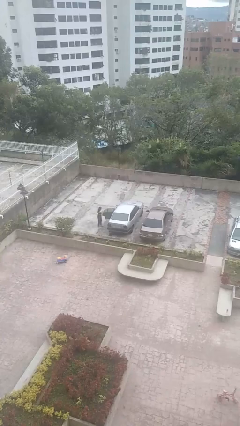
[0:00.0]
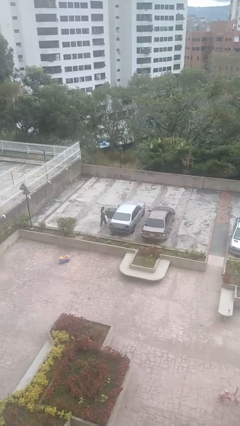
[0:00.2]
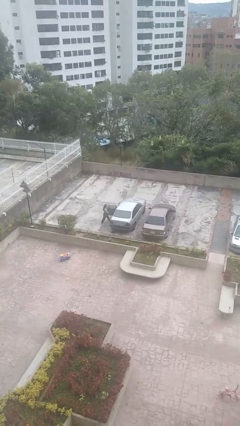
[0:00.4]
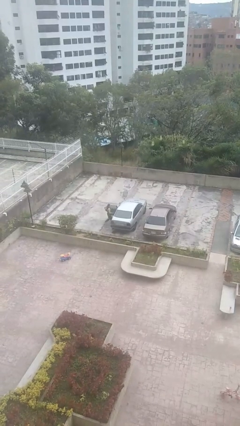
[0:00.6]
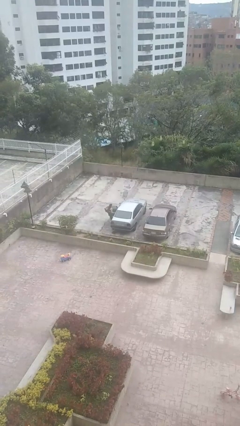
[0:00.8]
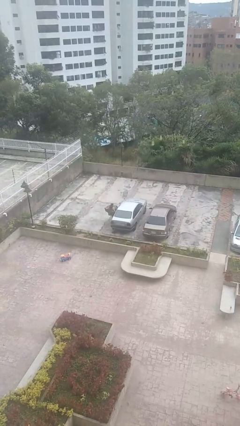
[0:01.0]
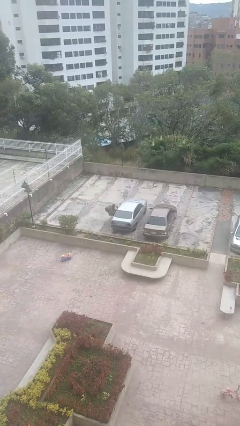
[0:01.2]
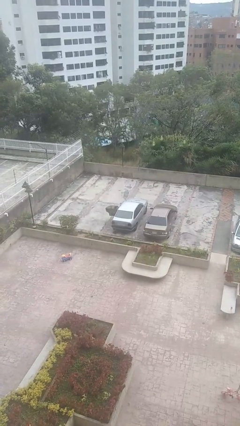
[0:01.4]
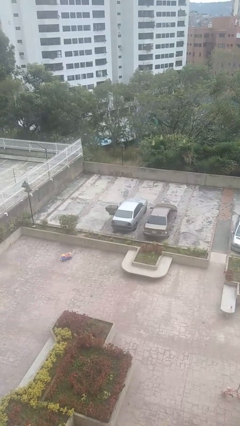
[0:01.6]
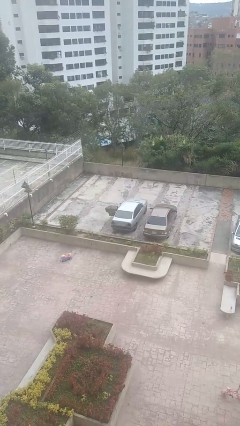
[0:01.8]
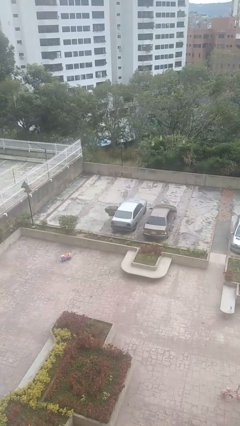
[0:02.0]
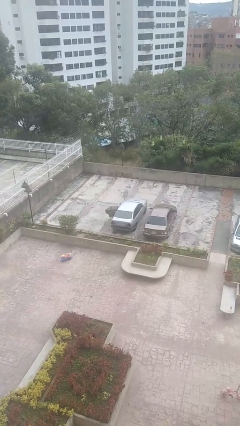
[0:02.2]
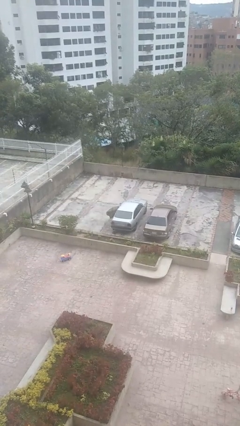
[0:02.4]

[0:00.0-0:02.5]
car picks up person

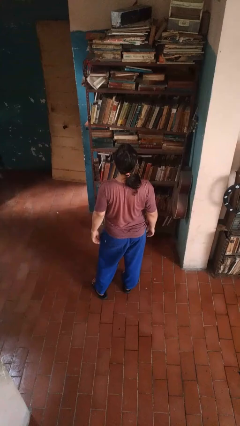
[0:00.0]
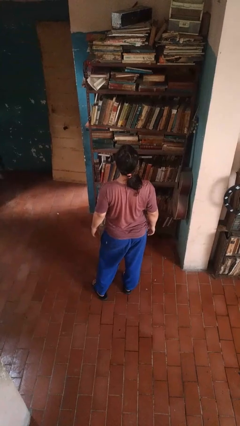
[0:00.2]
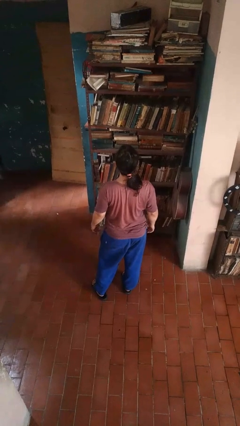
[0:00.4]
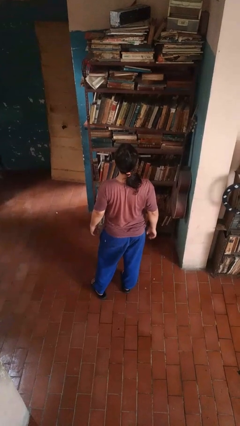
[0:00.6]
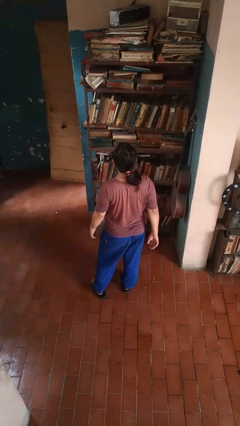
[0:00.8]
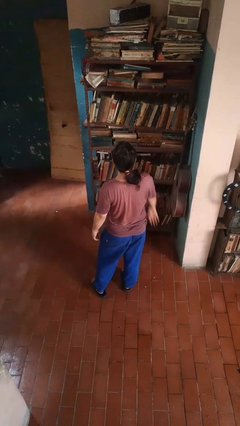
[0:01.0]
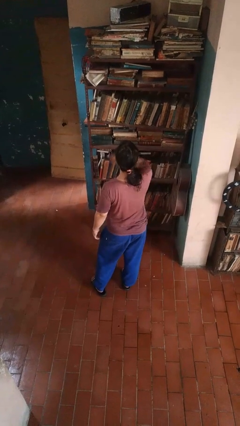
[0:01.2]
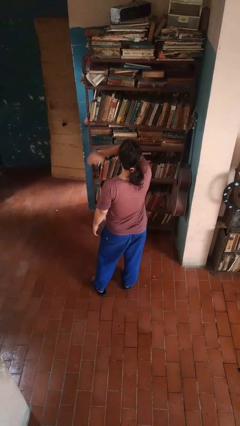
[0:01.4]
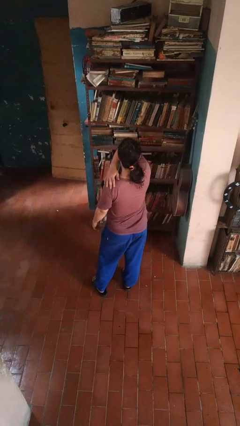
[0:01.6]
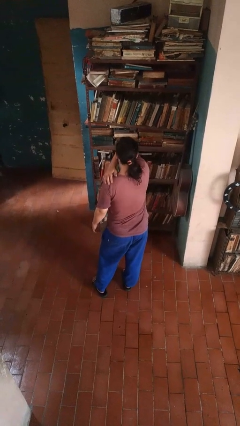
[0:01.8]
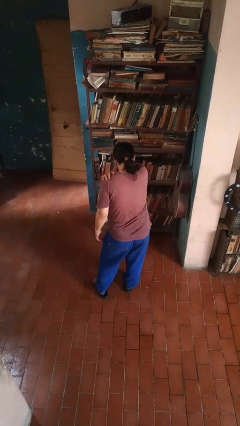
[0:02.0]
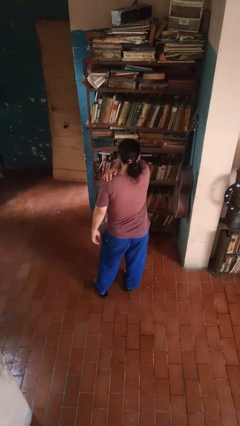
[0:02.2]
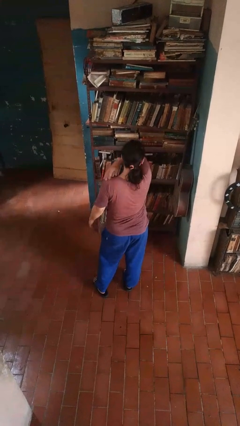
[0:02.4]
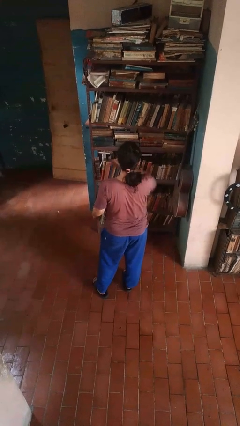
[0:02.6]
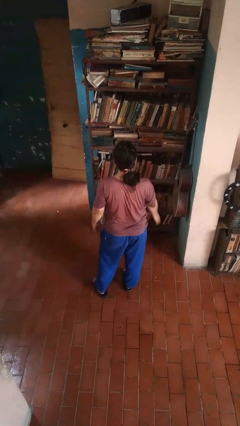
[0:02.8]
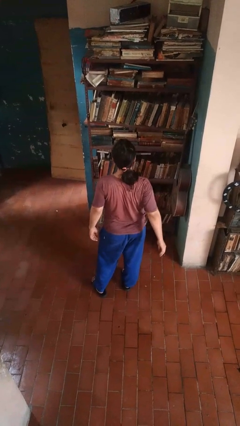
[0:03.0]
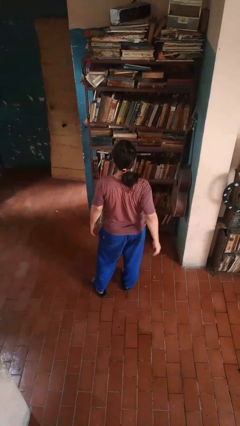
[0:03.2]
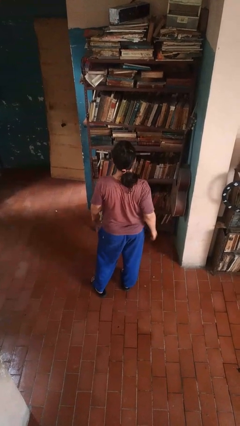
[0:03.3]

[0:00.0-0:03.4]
person sneezes into arm

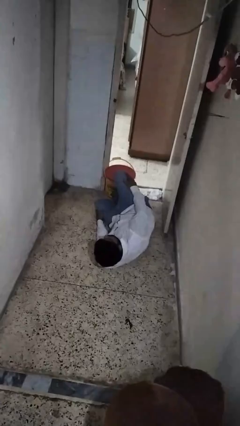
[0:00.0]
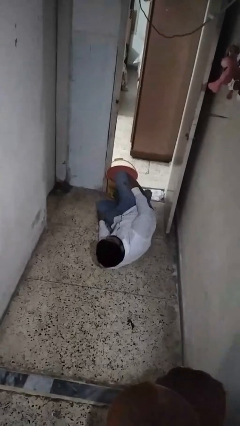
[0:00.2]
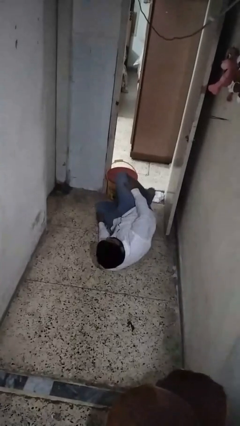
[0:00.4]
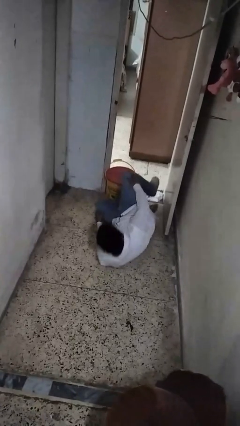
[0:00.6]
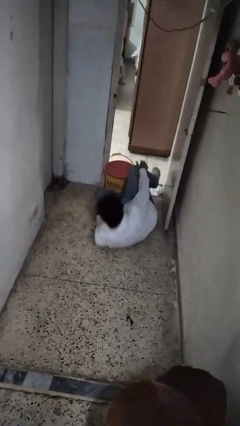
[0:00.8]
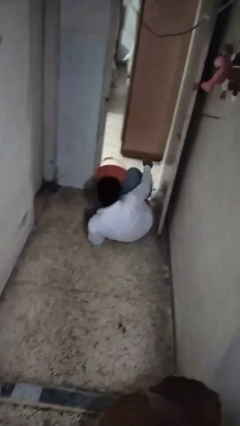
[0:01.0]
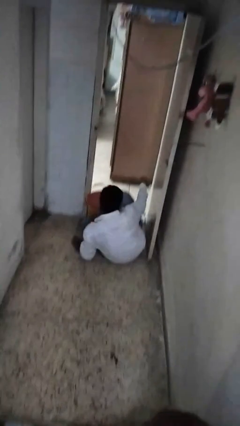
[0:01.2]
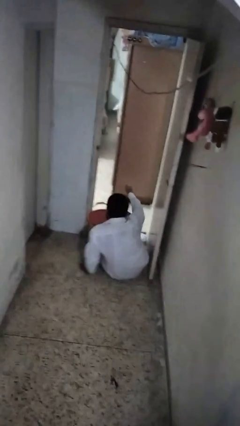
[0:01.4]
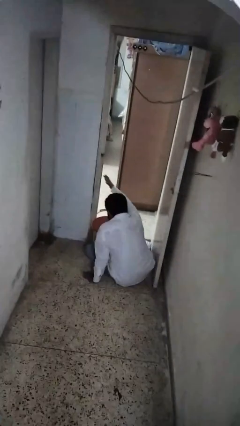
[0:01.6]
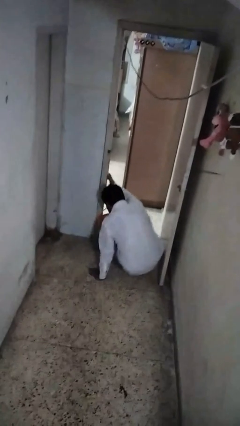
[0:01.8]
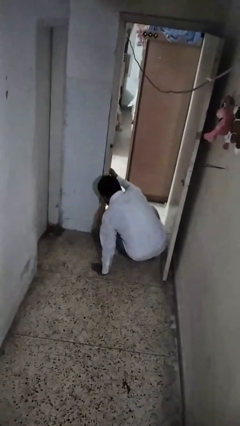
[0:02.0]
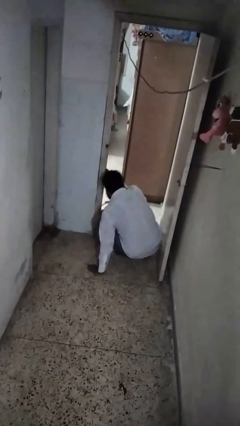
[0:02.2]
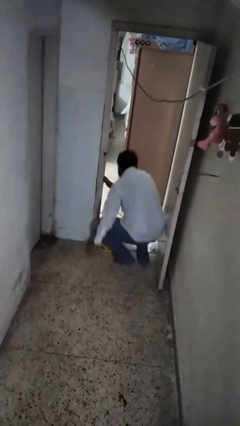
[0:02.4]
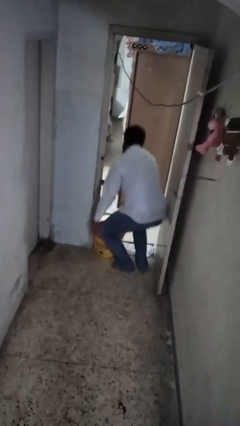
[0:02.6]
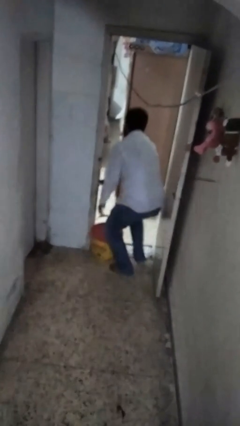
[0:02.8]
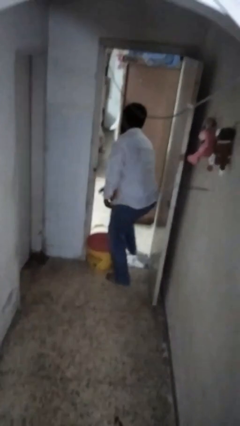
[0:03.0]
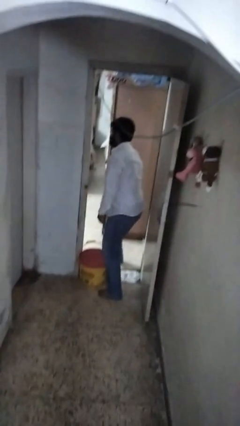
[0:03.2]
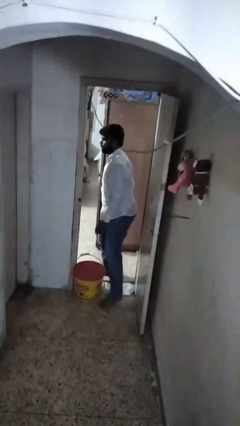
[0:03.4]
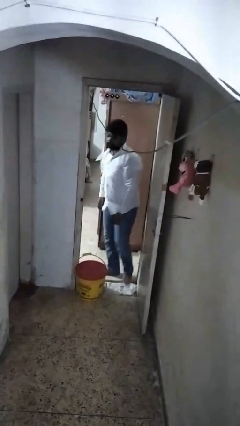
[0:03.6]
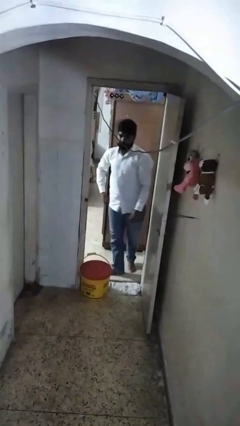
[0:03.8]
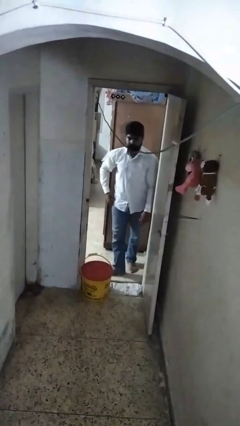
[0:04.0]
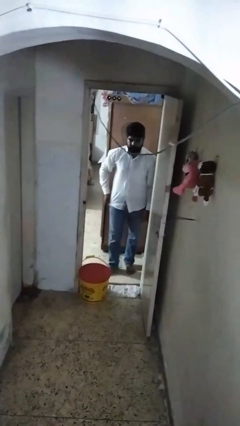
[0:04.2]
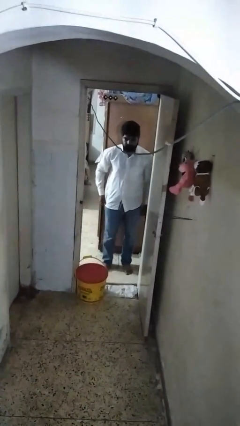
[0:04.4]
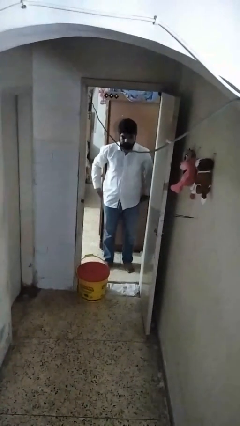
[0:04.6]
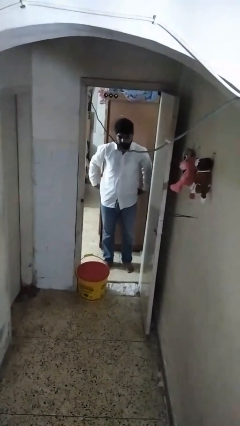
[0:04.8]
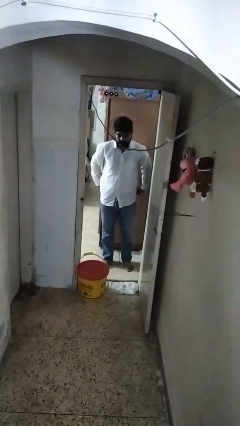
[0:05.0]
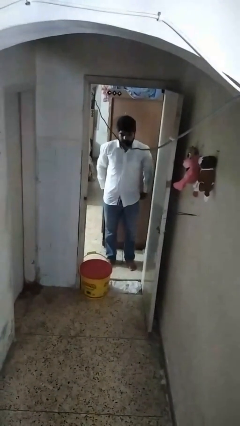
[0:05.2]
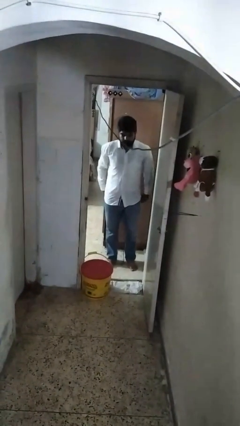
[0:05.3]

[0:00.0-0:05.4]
person stands up from floor

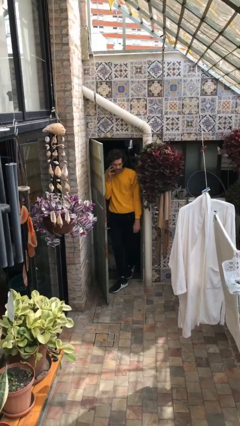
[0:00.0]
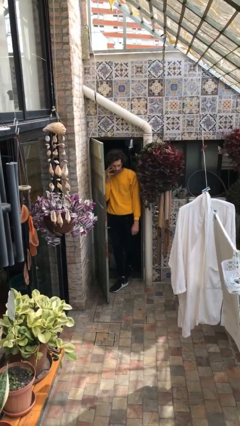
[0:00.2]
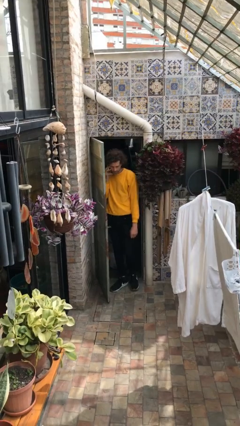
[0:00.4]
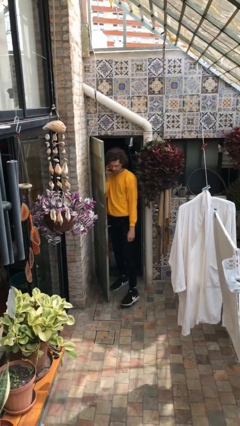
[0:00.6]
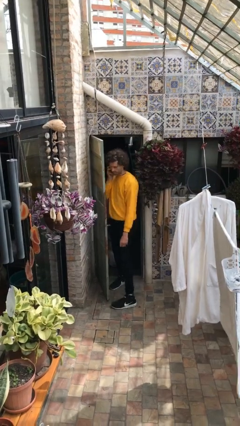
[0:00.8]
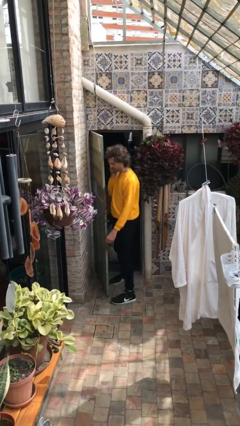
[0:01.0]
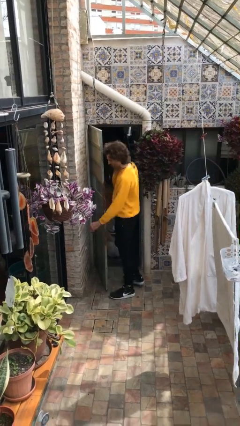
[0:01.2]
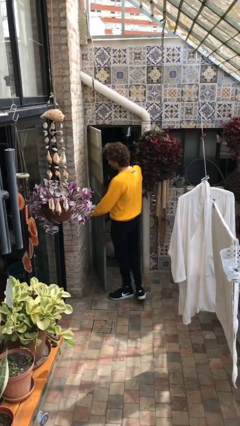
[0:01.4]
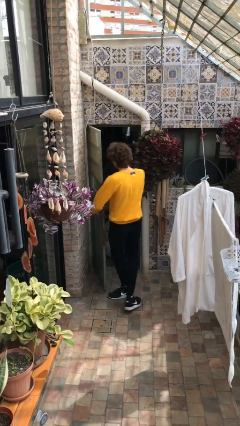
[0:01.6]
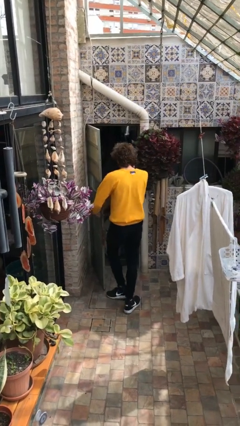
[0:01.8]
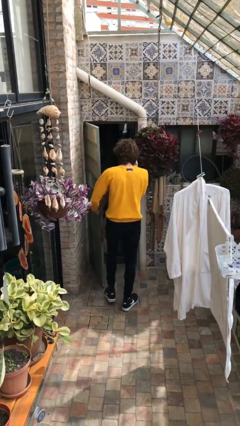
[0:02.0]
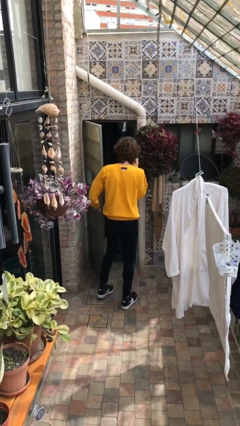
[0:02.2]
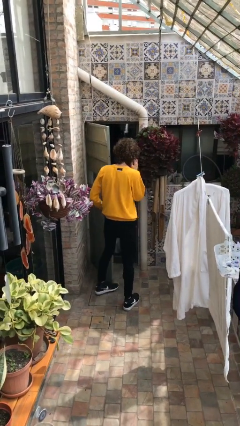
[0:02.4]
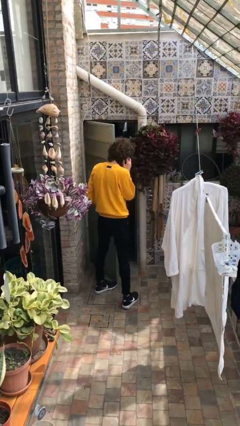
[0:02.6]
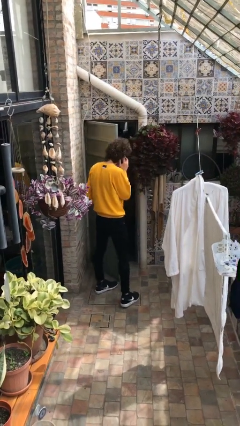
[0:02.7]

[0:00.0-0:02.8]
person enters scene through structure

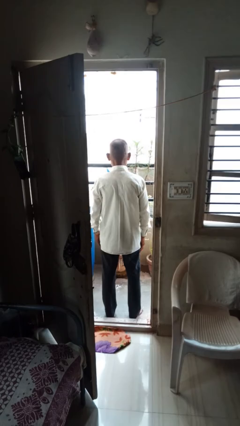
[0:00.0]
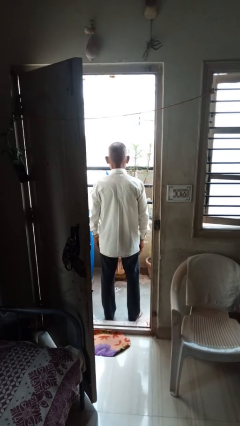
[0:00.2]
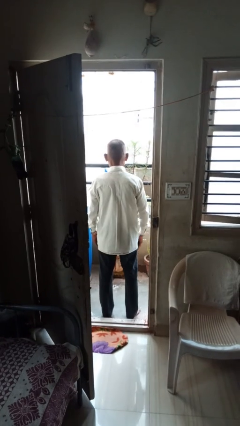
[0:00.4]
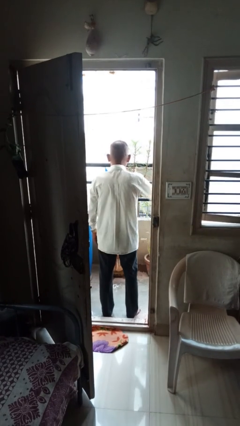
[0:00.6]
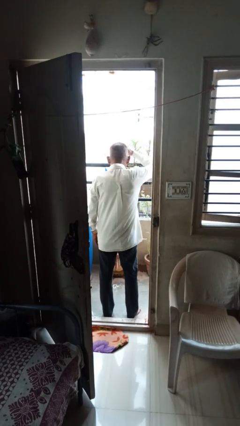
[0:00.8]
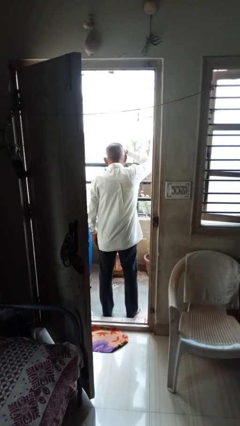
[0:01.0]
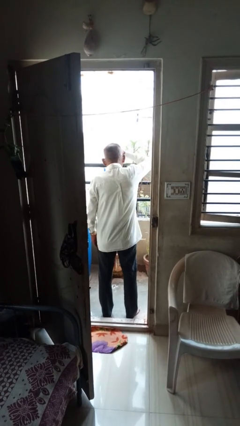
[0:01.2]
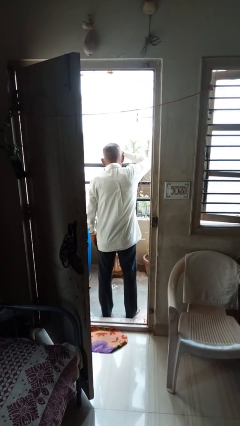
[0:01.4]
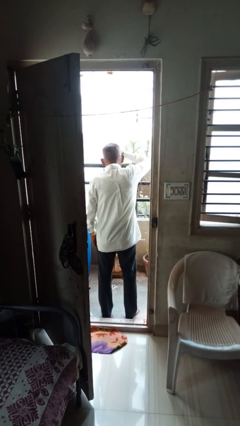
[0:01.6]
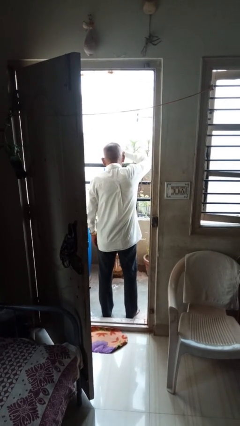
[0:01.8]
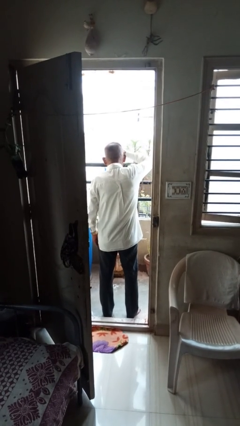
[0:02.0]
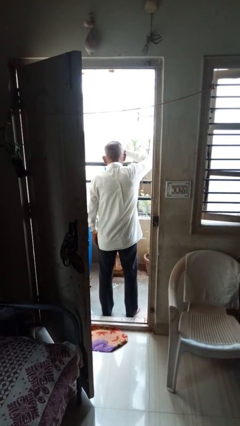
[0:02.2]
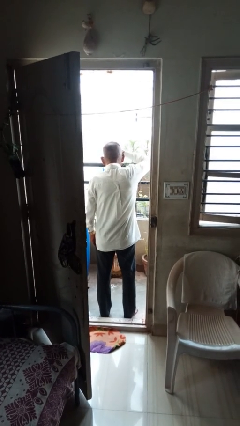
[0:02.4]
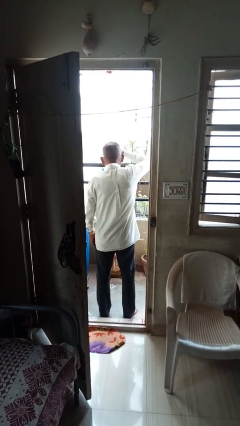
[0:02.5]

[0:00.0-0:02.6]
person shades eyes

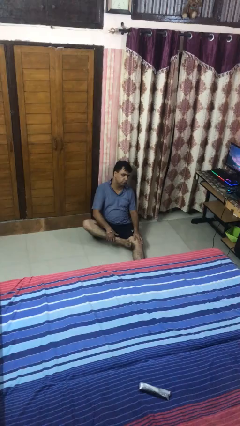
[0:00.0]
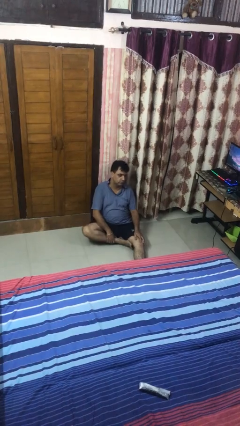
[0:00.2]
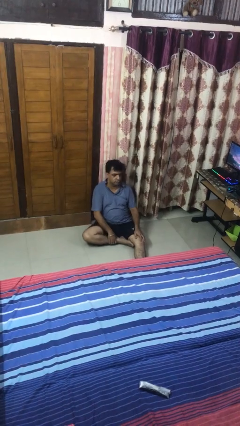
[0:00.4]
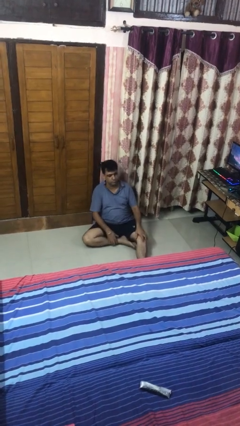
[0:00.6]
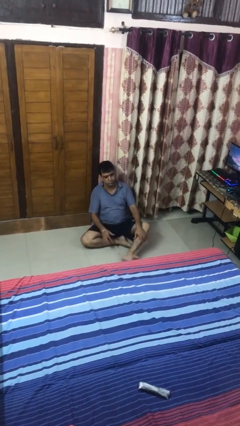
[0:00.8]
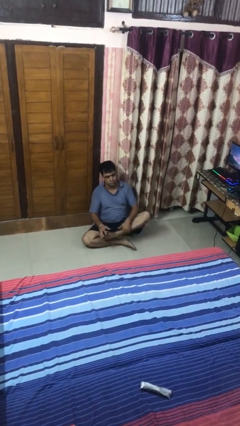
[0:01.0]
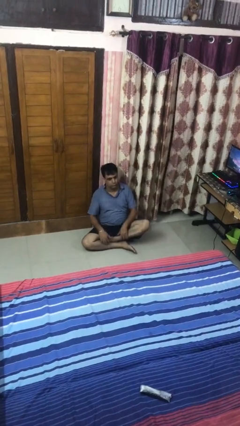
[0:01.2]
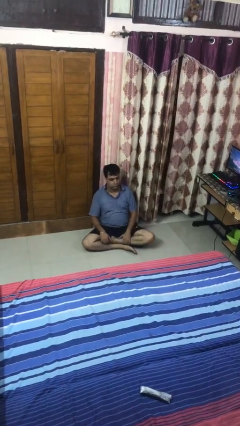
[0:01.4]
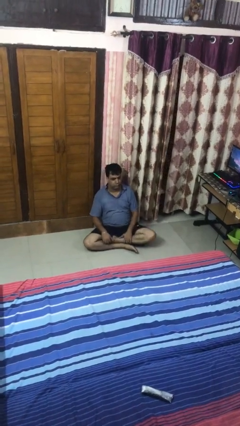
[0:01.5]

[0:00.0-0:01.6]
person crosses legs
